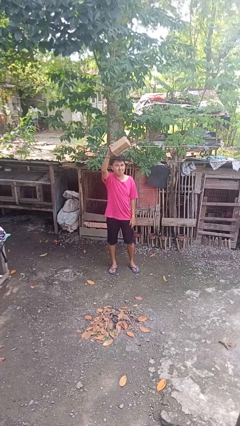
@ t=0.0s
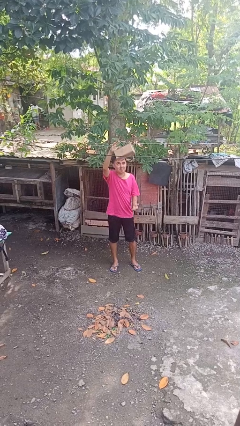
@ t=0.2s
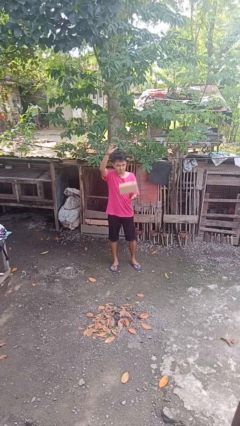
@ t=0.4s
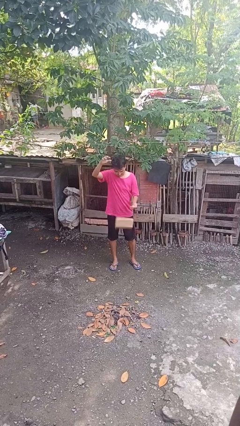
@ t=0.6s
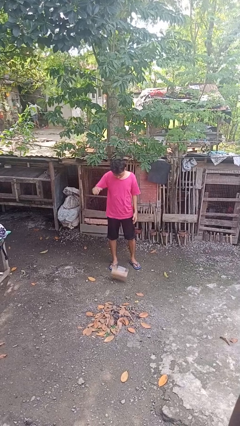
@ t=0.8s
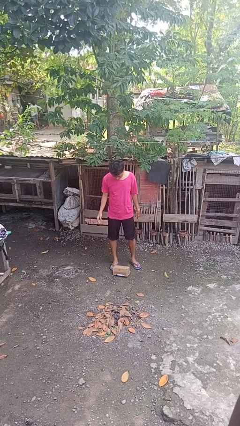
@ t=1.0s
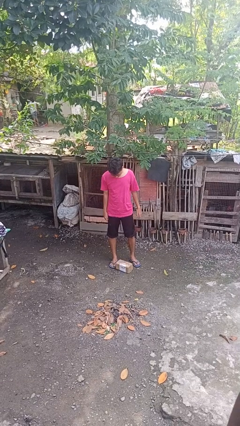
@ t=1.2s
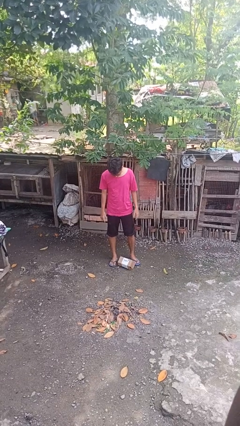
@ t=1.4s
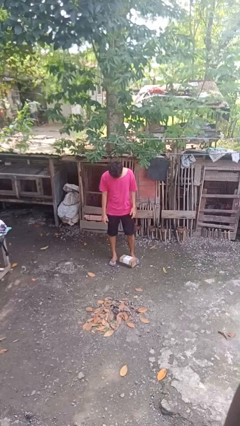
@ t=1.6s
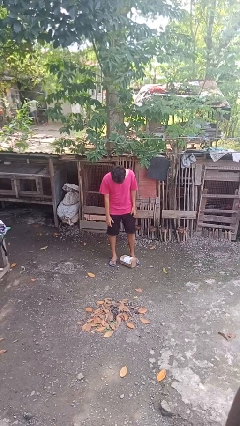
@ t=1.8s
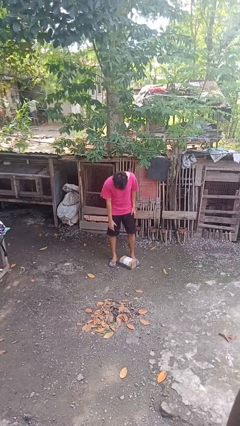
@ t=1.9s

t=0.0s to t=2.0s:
person drops object

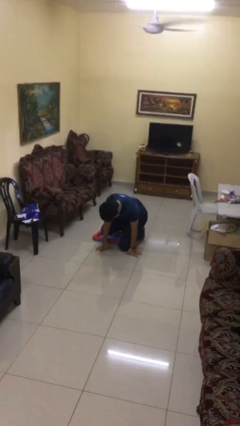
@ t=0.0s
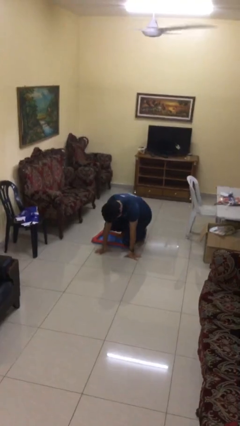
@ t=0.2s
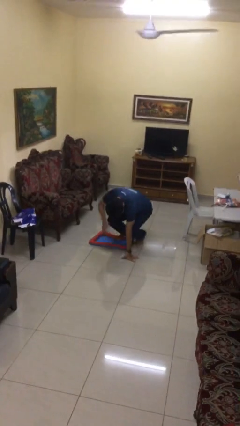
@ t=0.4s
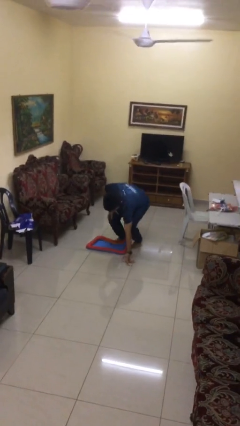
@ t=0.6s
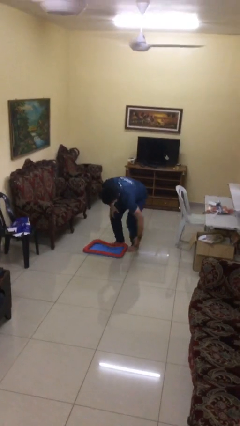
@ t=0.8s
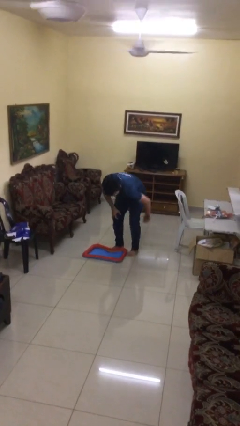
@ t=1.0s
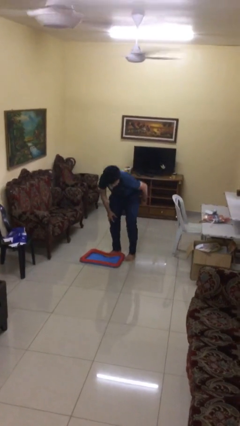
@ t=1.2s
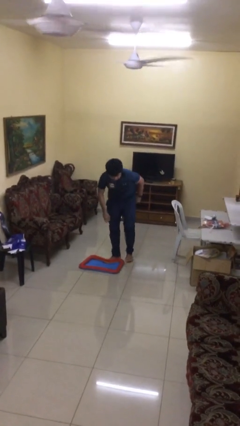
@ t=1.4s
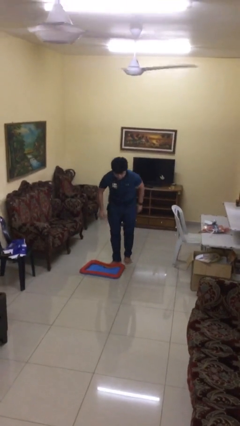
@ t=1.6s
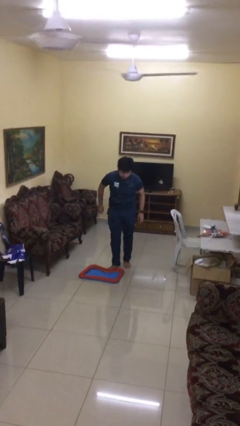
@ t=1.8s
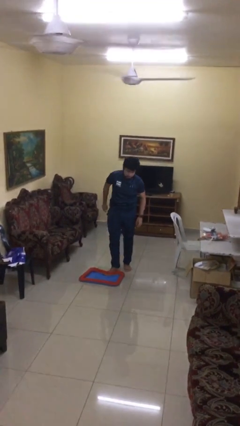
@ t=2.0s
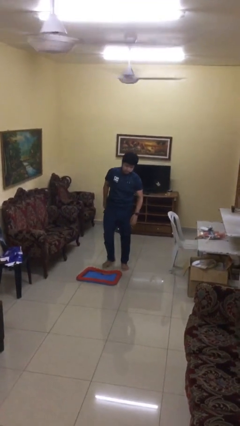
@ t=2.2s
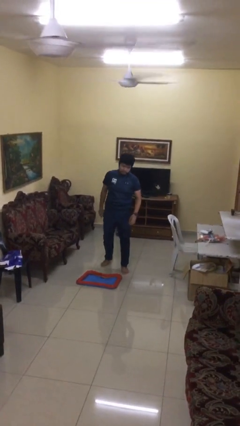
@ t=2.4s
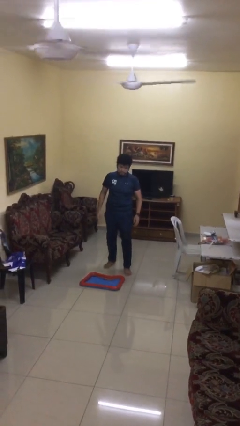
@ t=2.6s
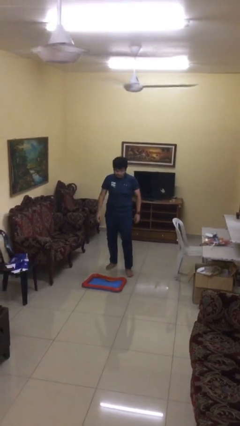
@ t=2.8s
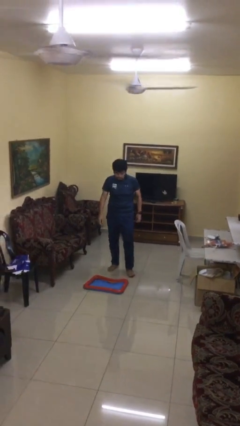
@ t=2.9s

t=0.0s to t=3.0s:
person stands up from floor

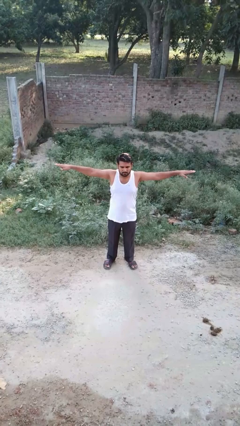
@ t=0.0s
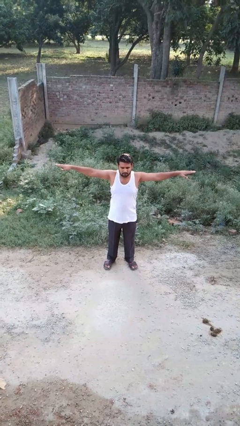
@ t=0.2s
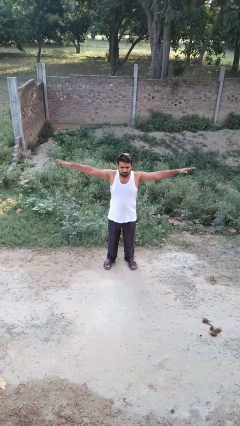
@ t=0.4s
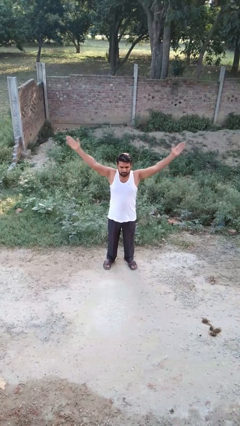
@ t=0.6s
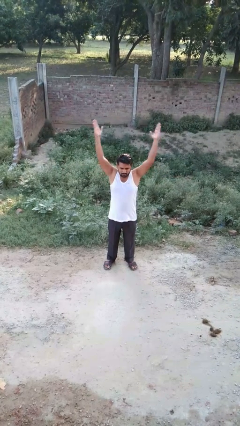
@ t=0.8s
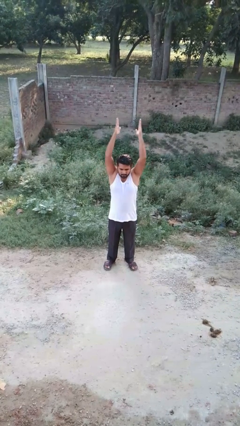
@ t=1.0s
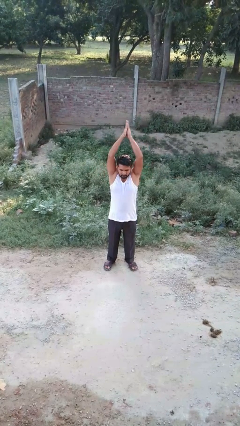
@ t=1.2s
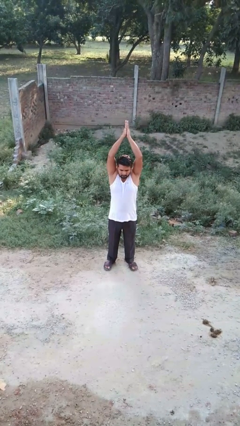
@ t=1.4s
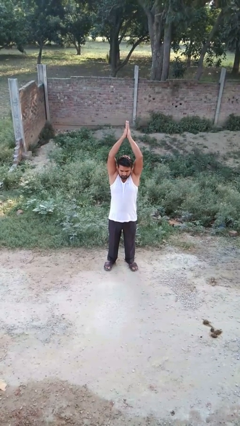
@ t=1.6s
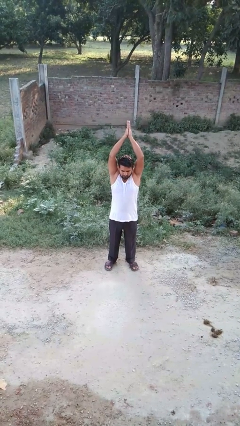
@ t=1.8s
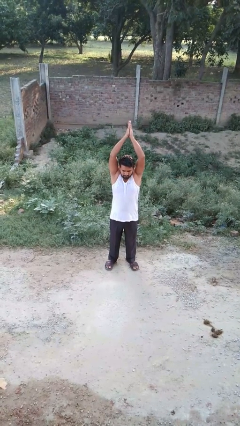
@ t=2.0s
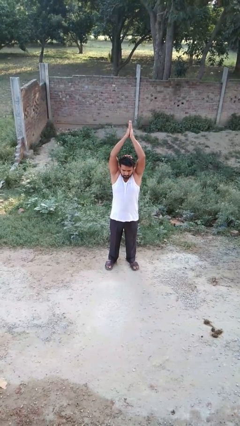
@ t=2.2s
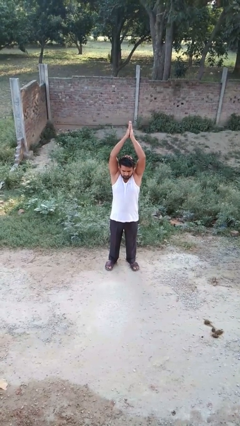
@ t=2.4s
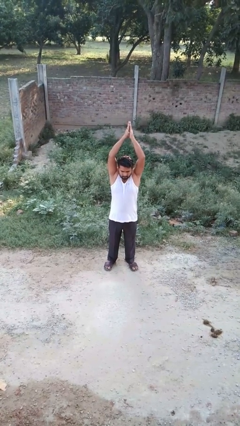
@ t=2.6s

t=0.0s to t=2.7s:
person stretches arms over head

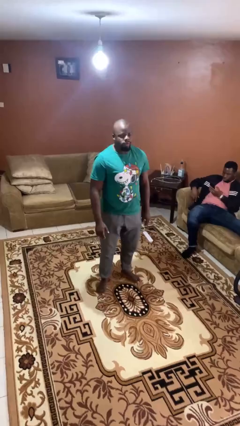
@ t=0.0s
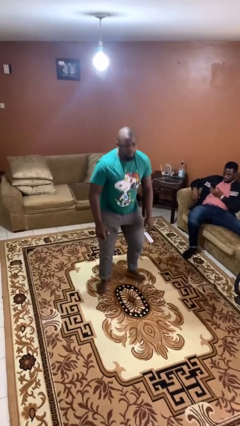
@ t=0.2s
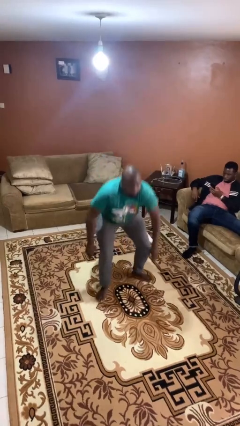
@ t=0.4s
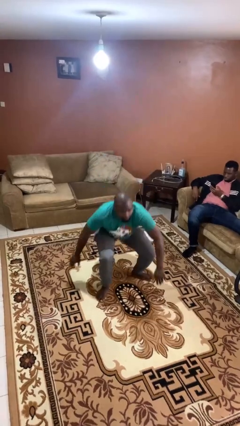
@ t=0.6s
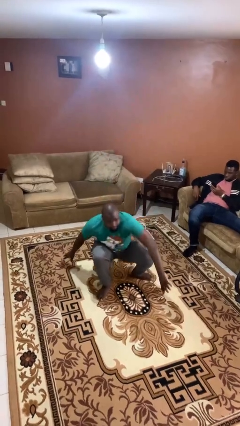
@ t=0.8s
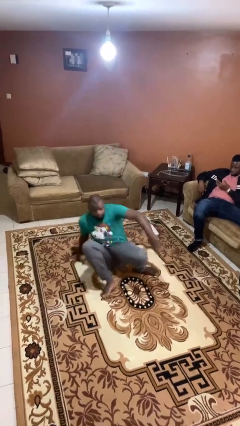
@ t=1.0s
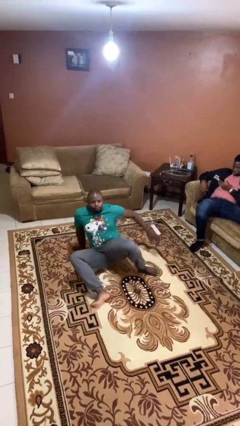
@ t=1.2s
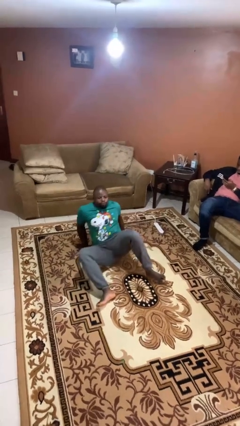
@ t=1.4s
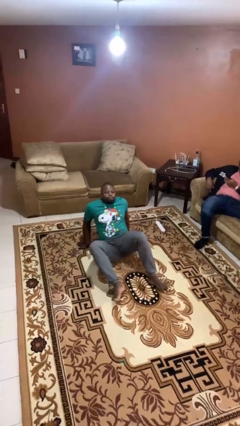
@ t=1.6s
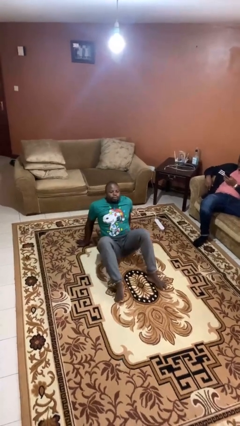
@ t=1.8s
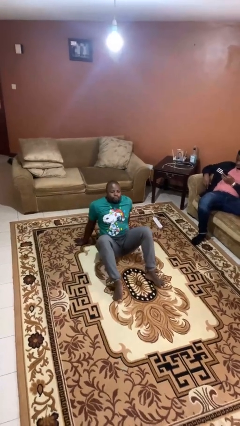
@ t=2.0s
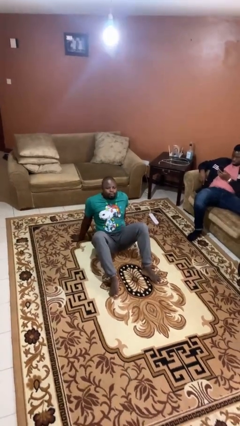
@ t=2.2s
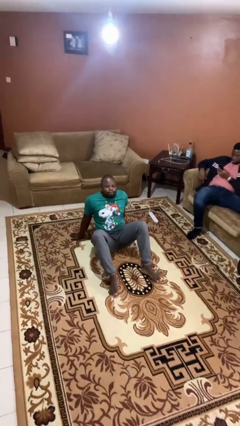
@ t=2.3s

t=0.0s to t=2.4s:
person sits down

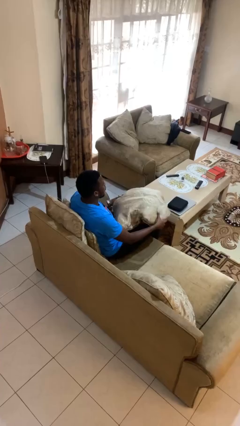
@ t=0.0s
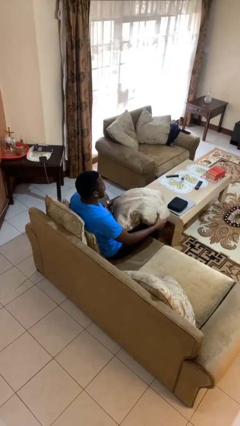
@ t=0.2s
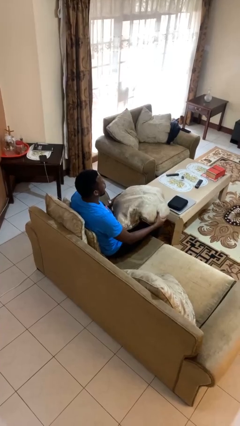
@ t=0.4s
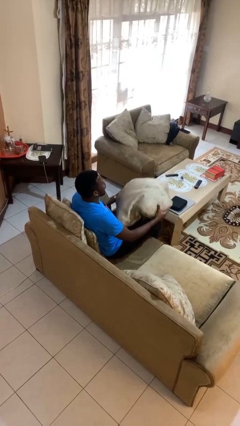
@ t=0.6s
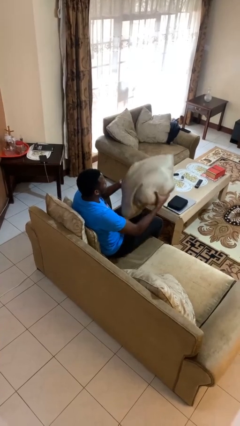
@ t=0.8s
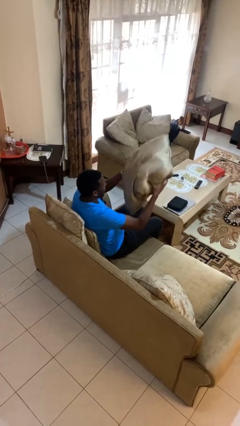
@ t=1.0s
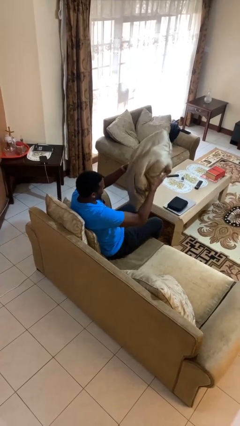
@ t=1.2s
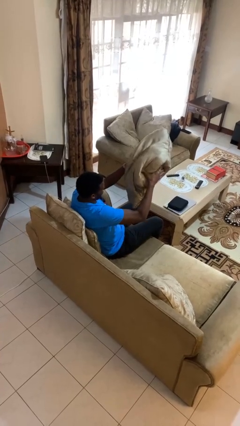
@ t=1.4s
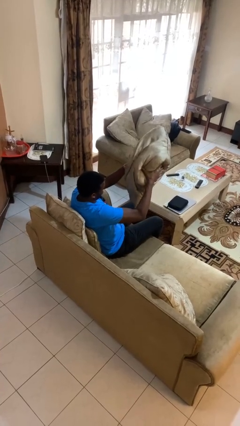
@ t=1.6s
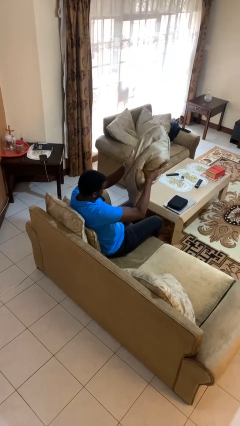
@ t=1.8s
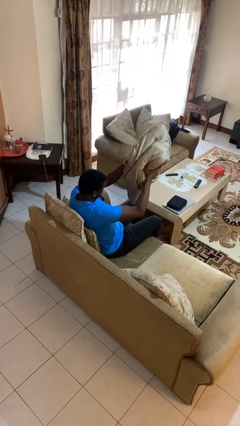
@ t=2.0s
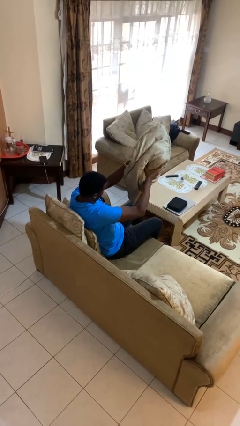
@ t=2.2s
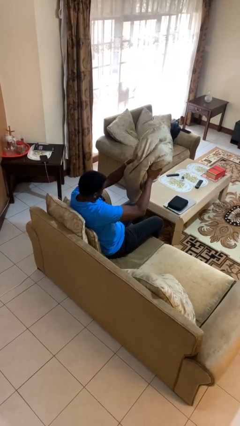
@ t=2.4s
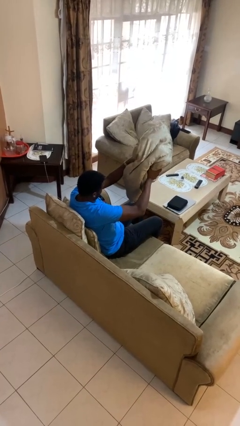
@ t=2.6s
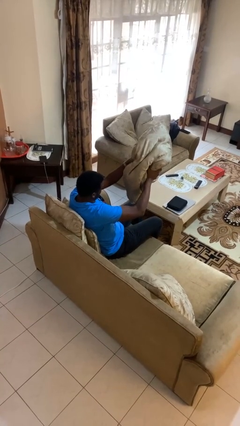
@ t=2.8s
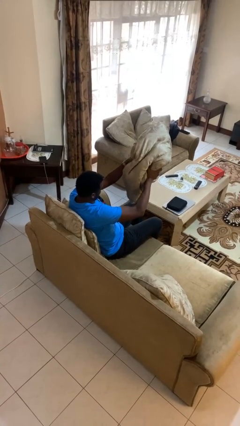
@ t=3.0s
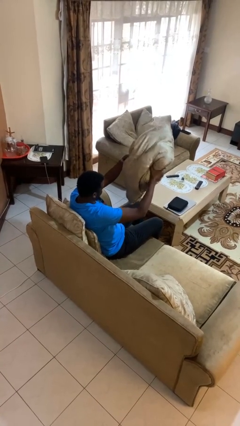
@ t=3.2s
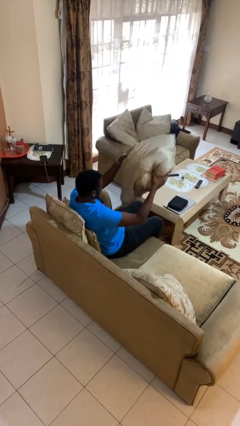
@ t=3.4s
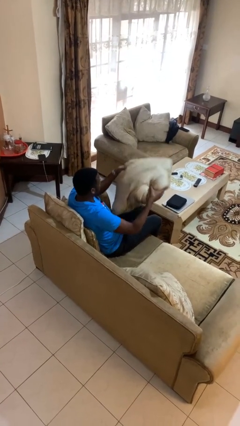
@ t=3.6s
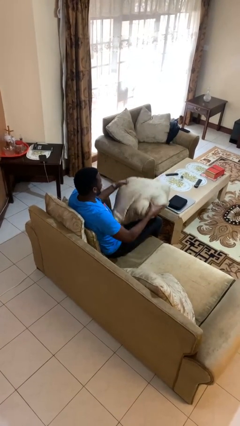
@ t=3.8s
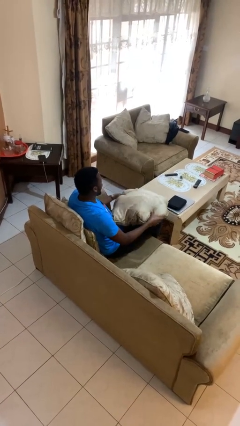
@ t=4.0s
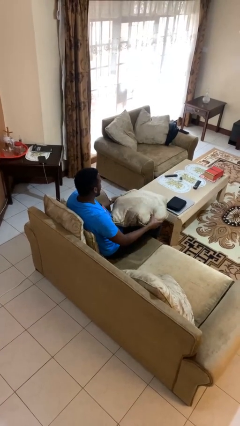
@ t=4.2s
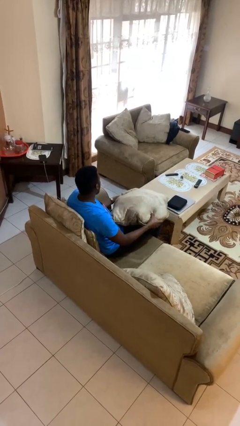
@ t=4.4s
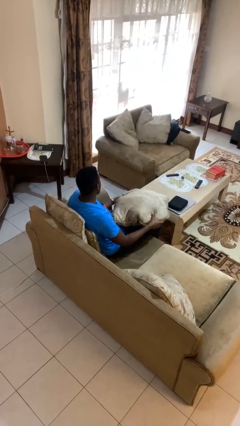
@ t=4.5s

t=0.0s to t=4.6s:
person squeezes object

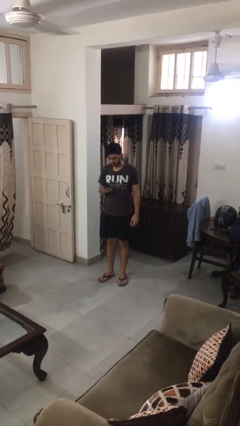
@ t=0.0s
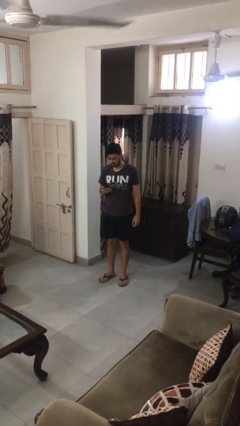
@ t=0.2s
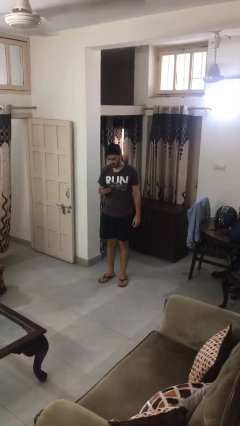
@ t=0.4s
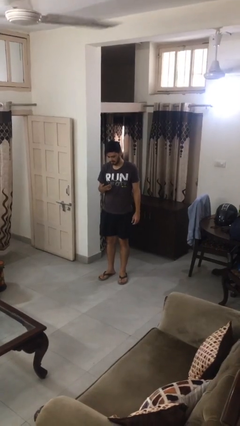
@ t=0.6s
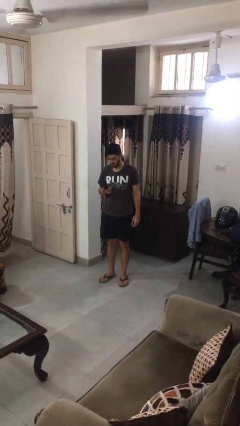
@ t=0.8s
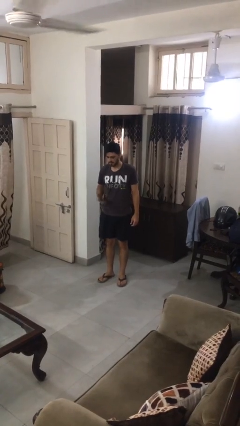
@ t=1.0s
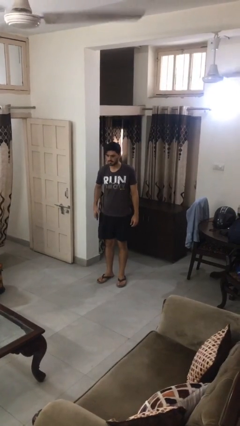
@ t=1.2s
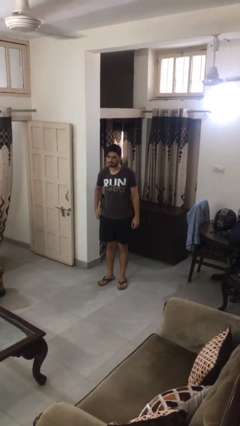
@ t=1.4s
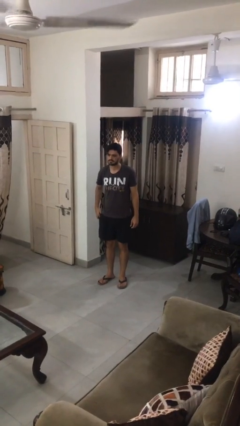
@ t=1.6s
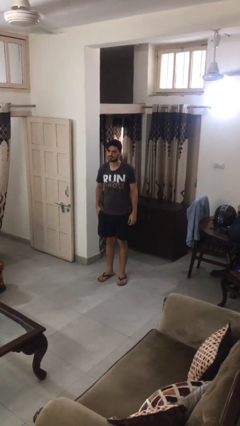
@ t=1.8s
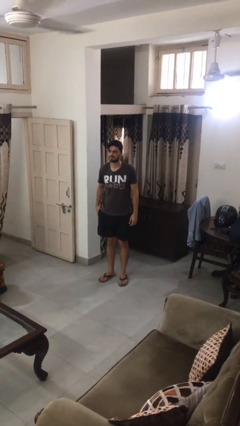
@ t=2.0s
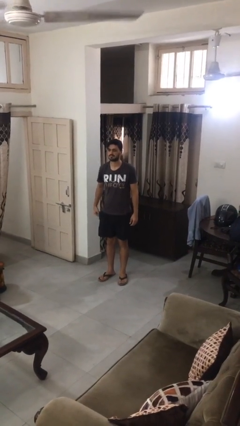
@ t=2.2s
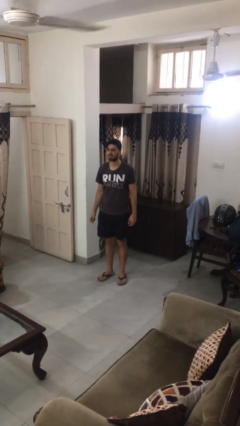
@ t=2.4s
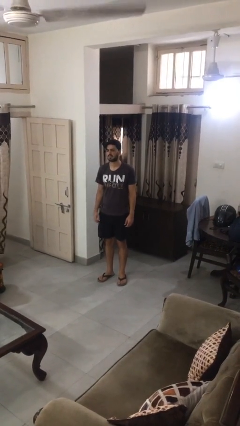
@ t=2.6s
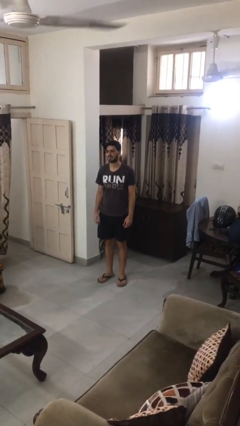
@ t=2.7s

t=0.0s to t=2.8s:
person puts phone into pocket
